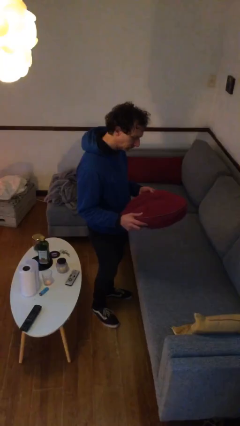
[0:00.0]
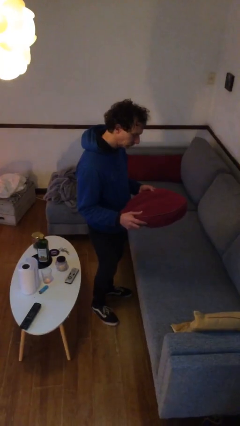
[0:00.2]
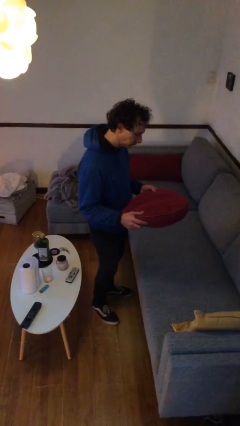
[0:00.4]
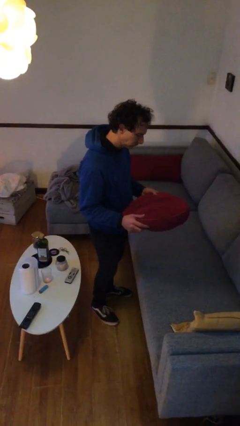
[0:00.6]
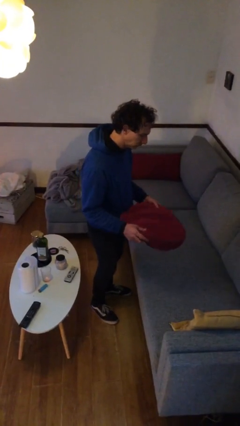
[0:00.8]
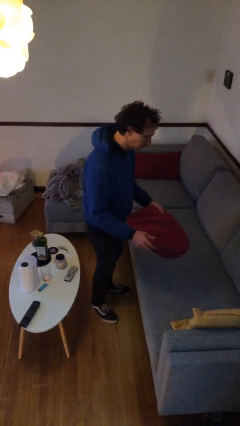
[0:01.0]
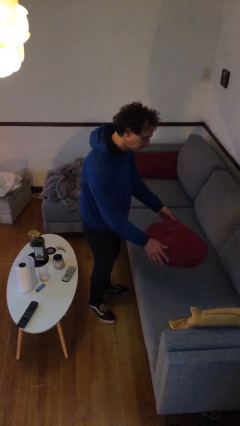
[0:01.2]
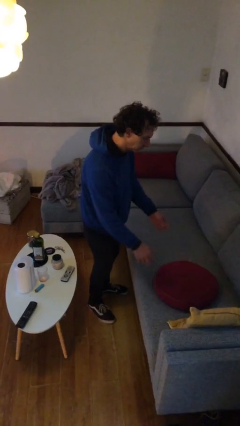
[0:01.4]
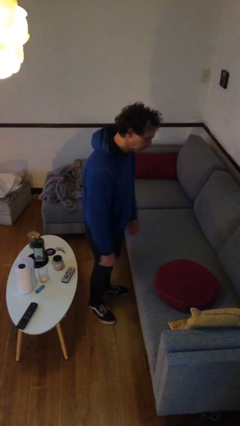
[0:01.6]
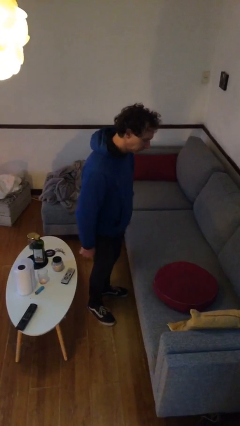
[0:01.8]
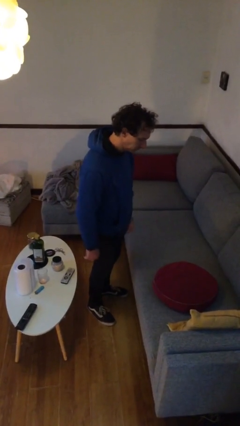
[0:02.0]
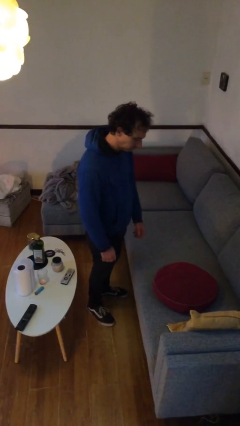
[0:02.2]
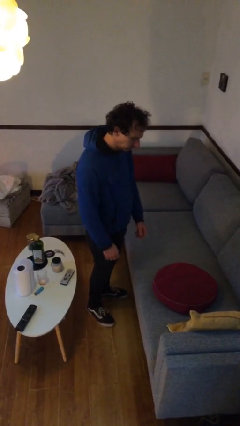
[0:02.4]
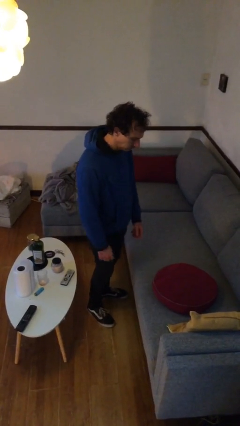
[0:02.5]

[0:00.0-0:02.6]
person puts down object on couch

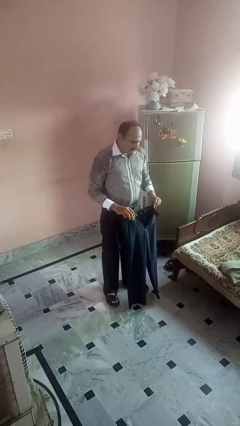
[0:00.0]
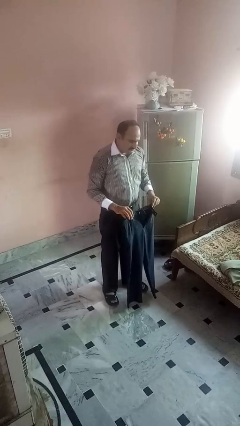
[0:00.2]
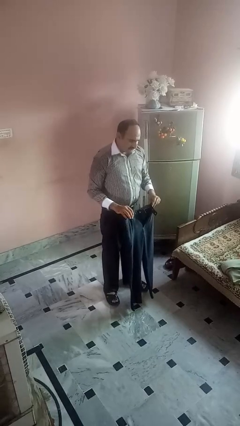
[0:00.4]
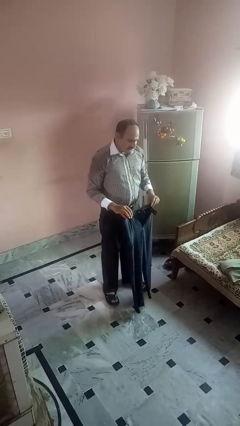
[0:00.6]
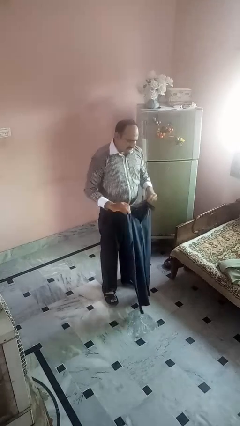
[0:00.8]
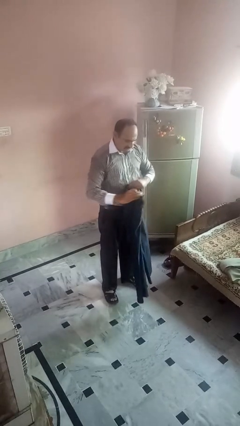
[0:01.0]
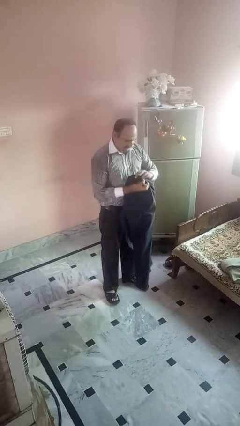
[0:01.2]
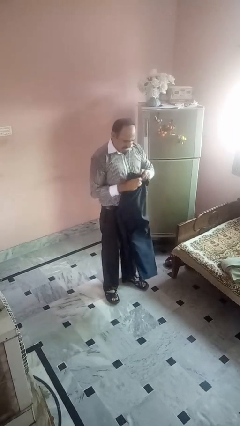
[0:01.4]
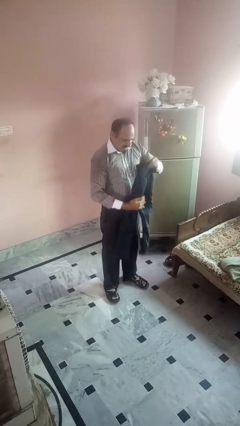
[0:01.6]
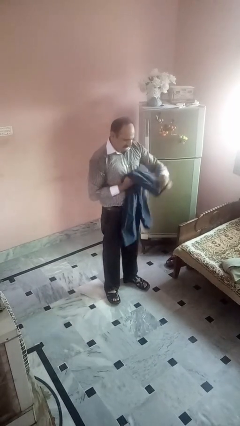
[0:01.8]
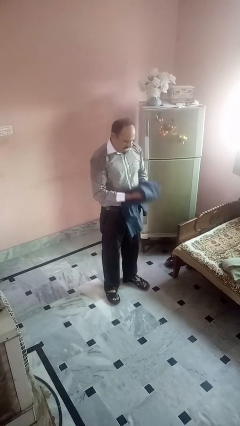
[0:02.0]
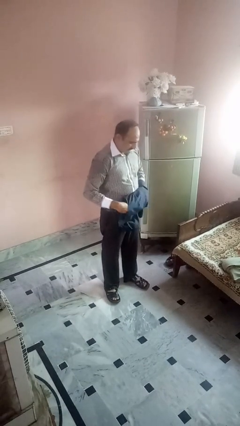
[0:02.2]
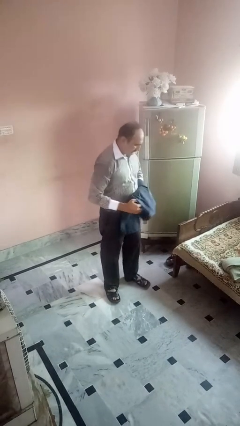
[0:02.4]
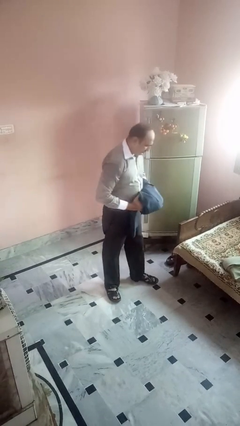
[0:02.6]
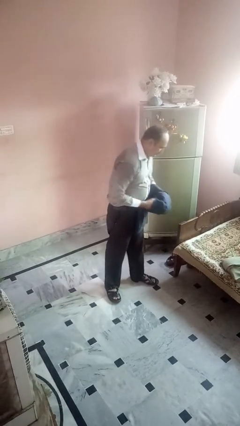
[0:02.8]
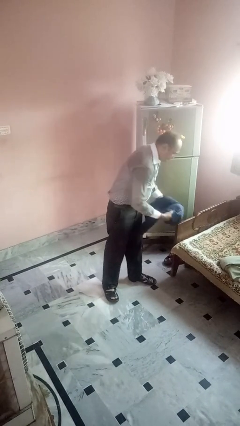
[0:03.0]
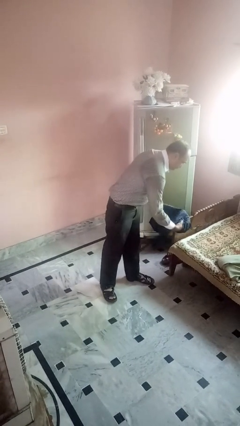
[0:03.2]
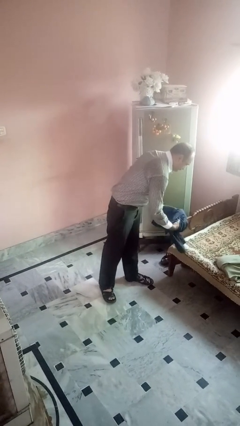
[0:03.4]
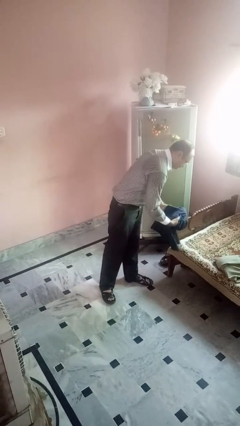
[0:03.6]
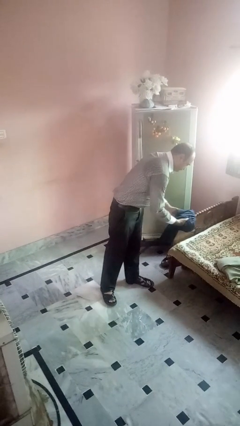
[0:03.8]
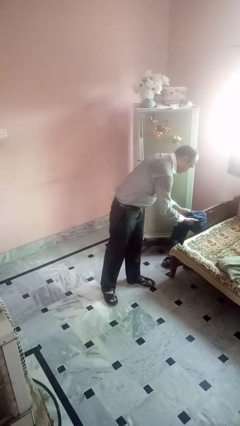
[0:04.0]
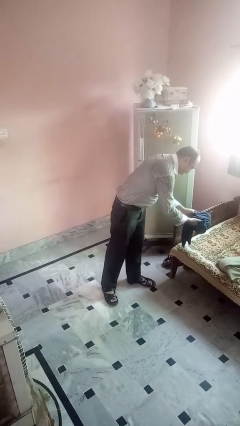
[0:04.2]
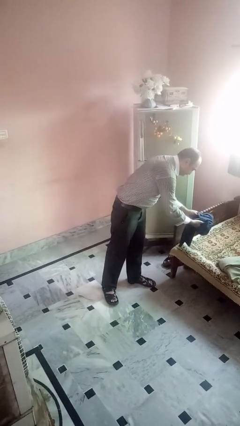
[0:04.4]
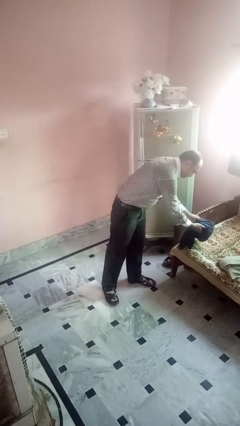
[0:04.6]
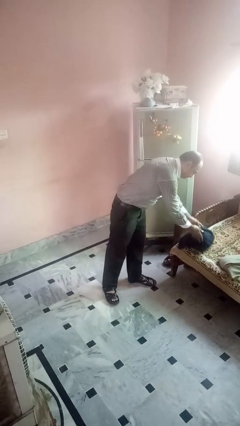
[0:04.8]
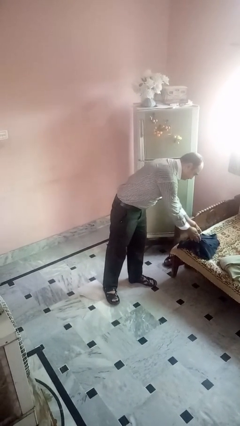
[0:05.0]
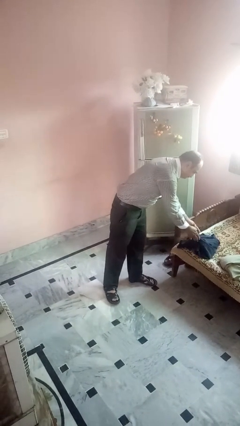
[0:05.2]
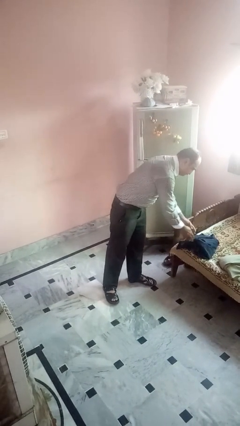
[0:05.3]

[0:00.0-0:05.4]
person folds pants

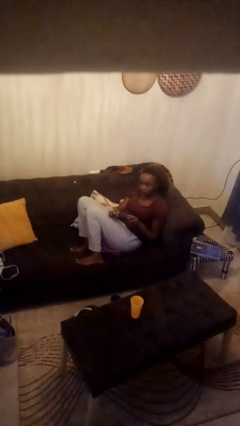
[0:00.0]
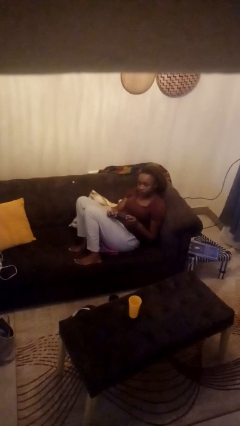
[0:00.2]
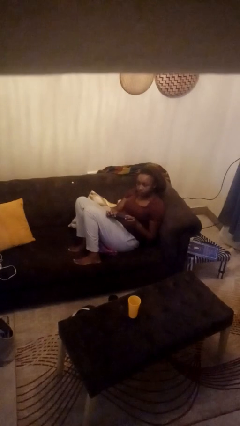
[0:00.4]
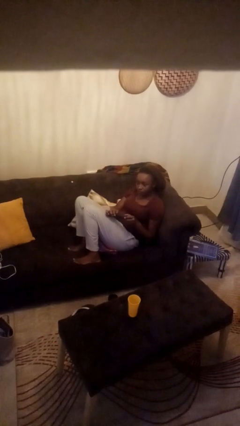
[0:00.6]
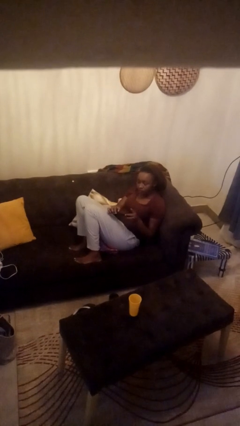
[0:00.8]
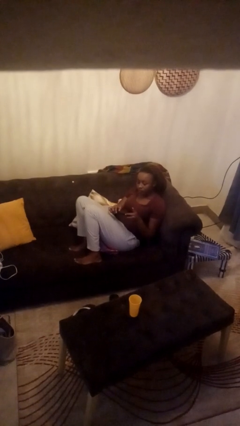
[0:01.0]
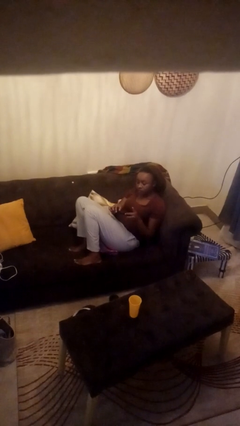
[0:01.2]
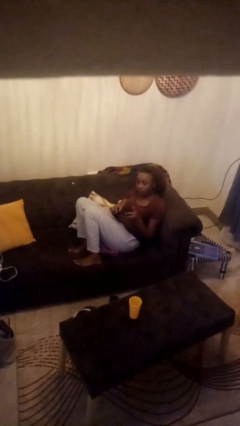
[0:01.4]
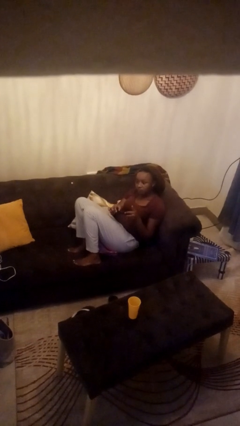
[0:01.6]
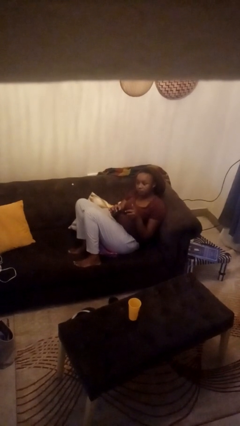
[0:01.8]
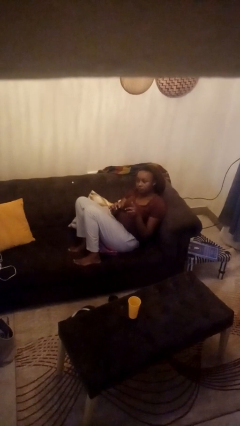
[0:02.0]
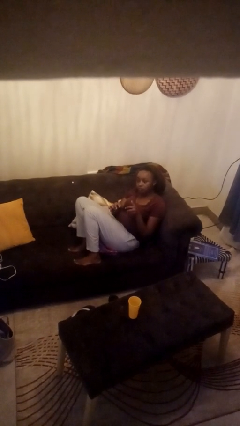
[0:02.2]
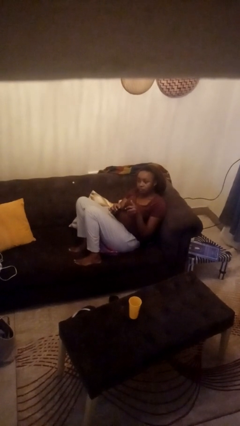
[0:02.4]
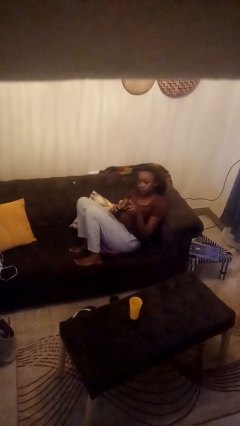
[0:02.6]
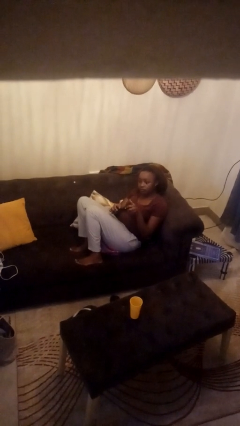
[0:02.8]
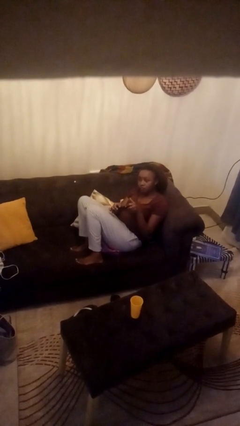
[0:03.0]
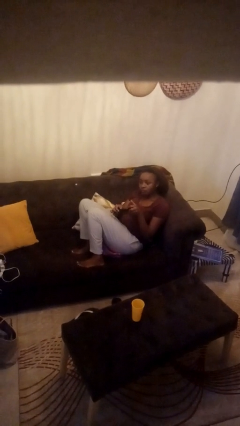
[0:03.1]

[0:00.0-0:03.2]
person interacts with handheld game

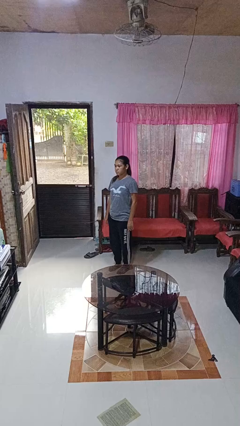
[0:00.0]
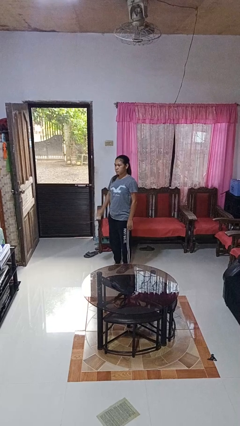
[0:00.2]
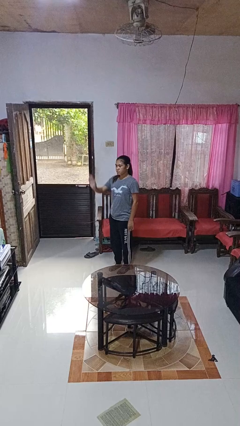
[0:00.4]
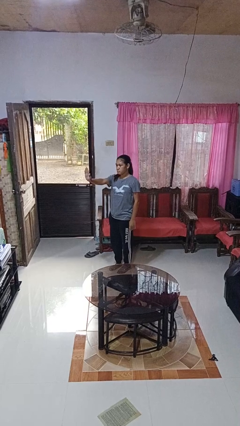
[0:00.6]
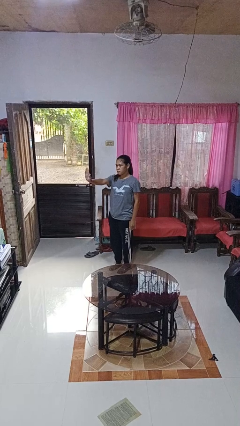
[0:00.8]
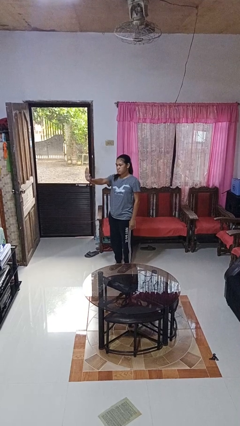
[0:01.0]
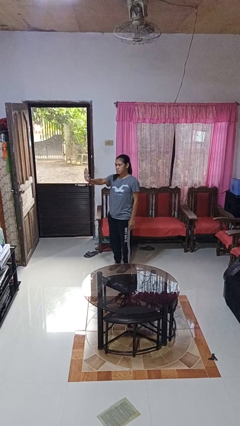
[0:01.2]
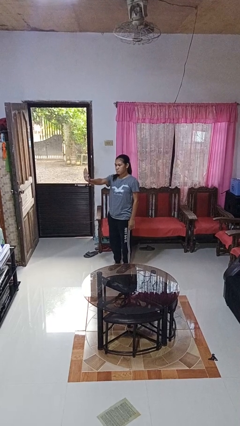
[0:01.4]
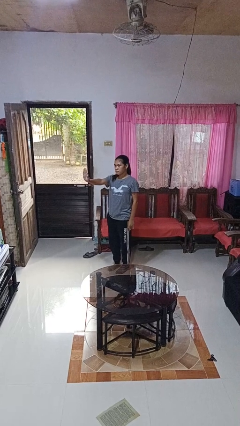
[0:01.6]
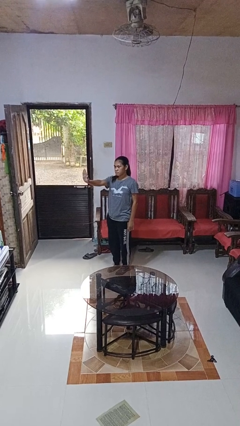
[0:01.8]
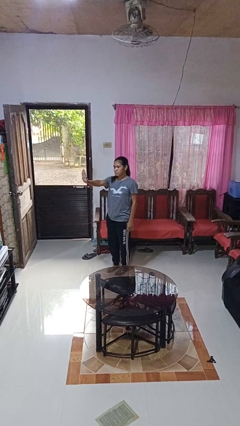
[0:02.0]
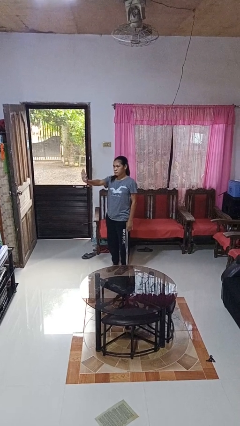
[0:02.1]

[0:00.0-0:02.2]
person gestures stop

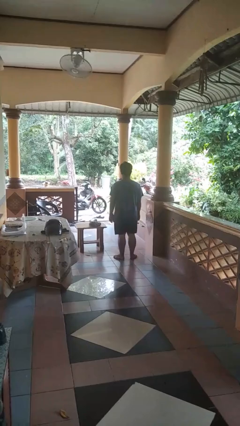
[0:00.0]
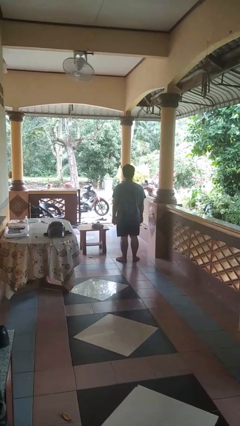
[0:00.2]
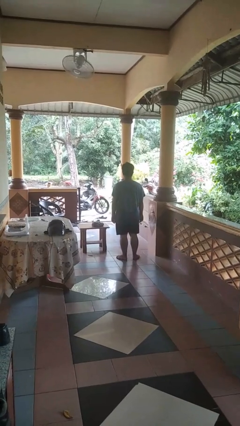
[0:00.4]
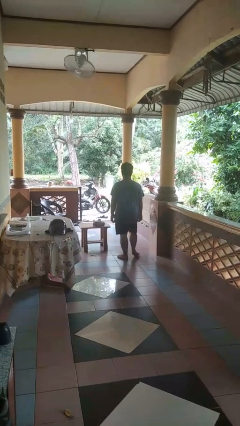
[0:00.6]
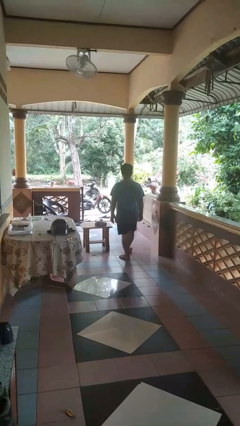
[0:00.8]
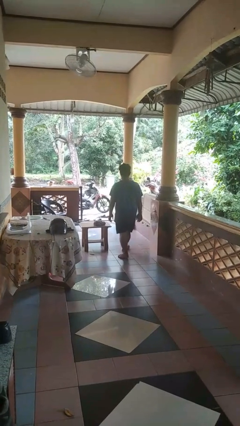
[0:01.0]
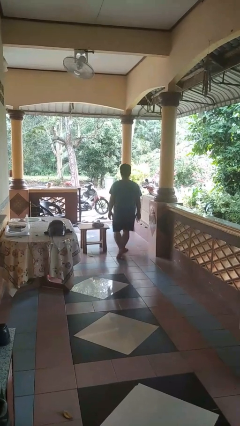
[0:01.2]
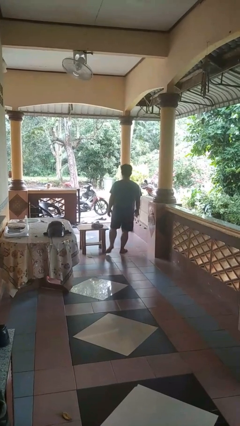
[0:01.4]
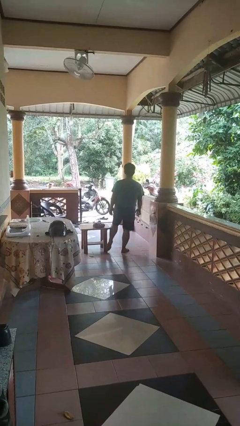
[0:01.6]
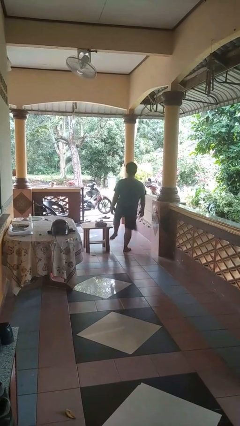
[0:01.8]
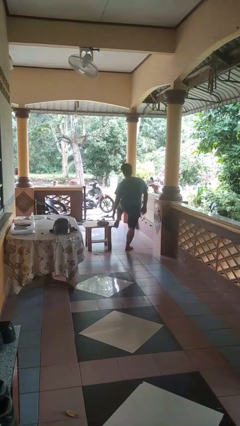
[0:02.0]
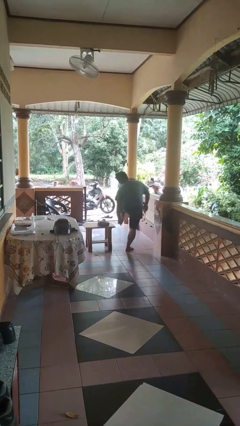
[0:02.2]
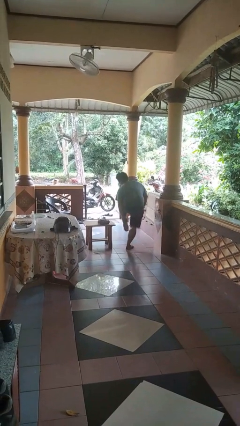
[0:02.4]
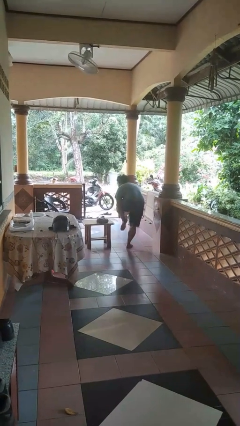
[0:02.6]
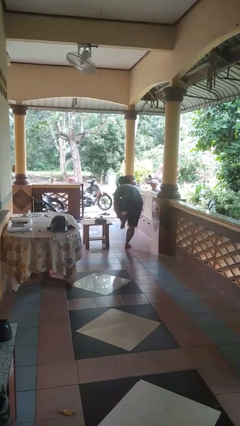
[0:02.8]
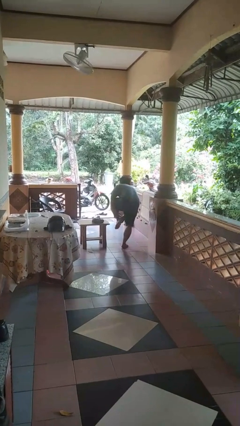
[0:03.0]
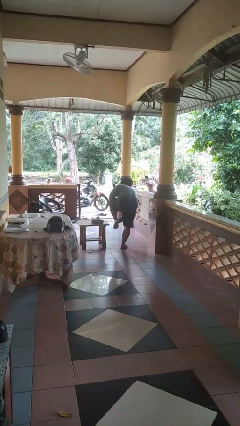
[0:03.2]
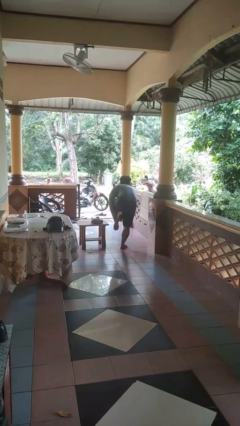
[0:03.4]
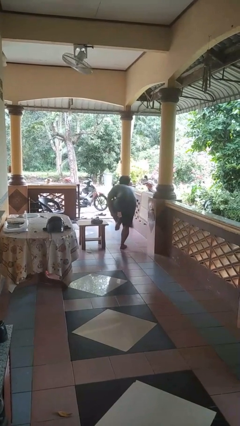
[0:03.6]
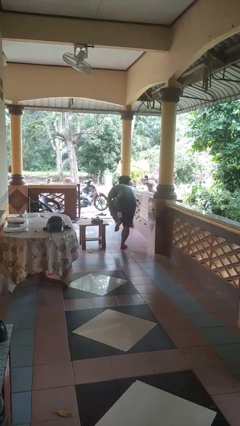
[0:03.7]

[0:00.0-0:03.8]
person stubs toe

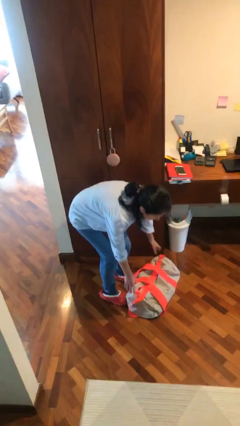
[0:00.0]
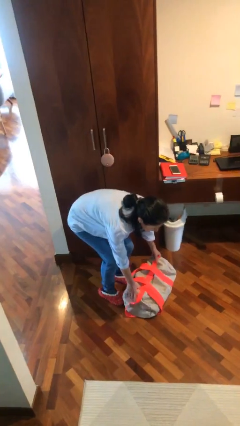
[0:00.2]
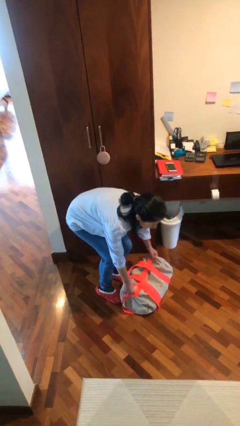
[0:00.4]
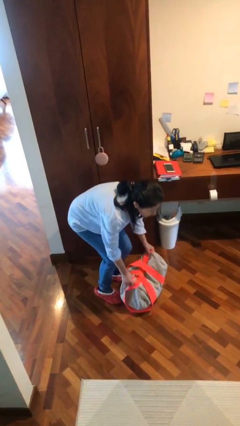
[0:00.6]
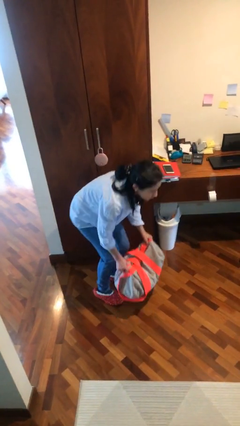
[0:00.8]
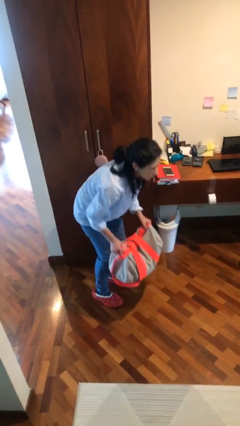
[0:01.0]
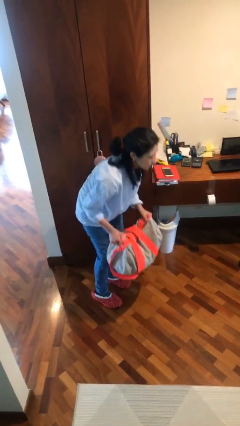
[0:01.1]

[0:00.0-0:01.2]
person picks up object from floor
